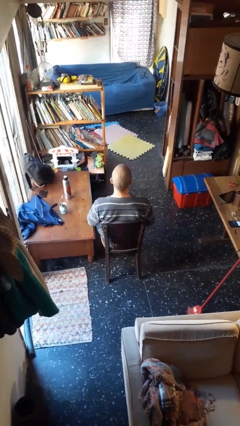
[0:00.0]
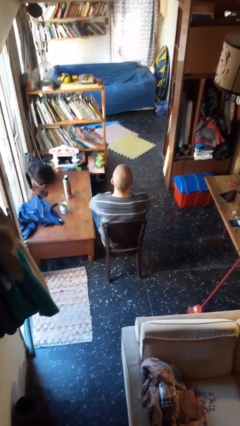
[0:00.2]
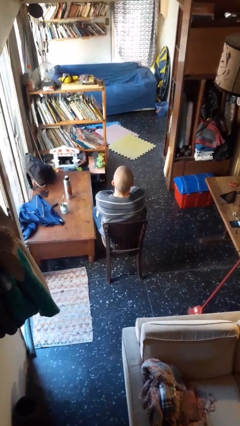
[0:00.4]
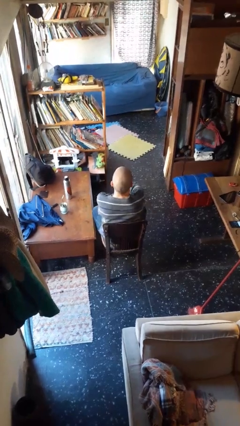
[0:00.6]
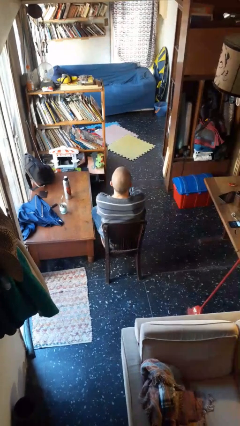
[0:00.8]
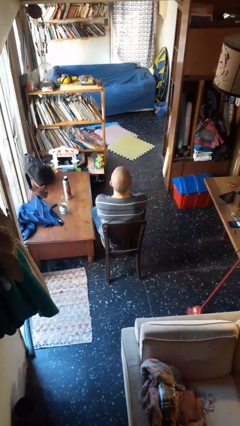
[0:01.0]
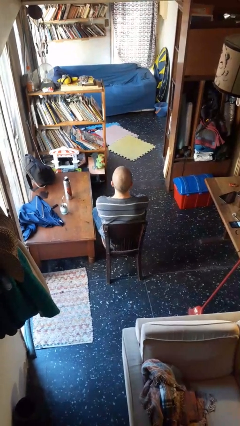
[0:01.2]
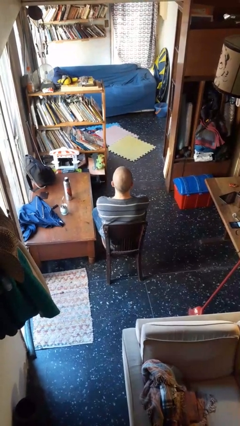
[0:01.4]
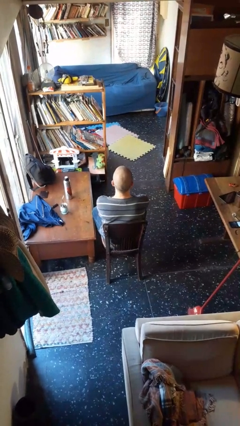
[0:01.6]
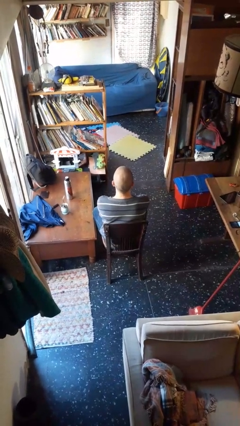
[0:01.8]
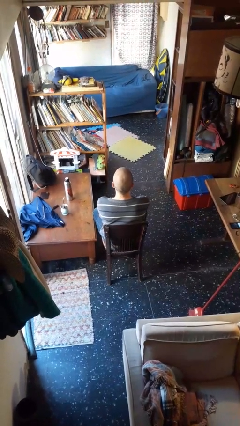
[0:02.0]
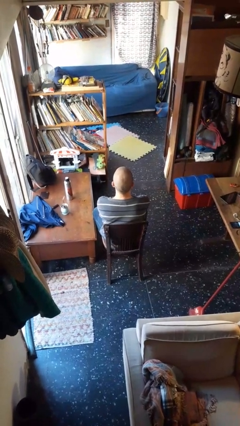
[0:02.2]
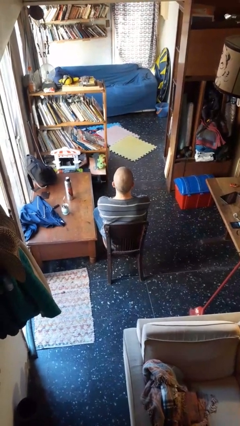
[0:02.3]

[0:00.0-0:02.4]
person crosses arms

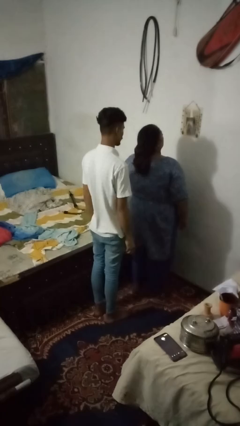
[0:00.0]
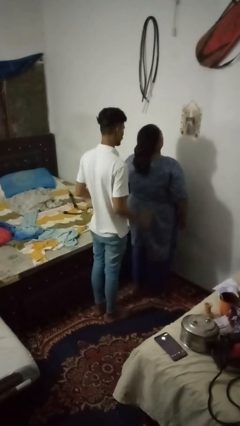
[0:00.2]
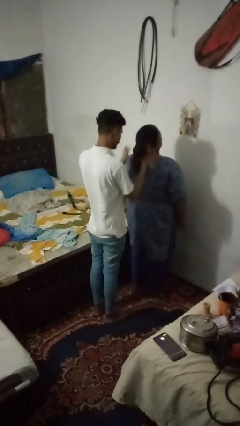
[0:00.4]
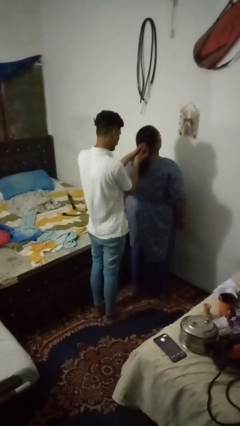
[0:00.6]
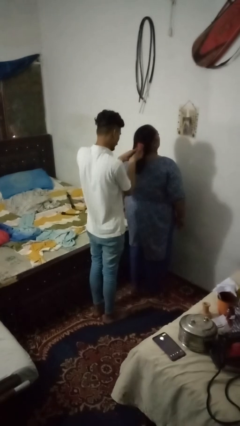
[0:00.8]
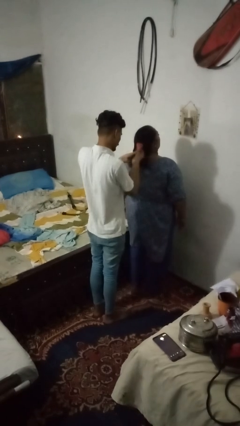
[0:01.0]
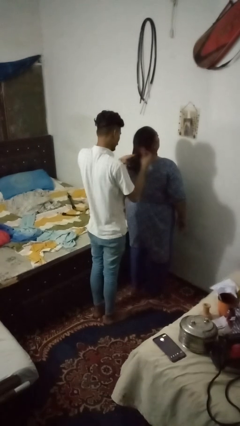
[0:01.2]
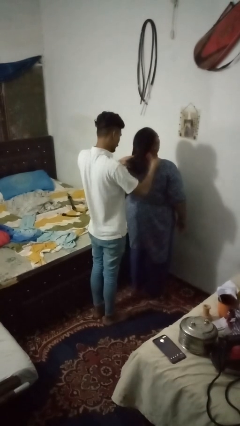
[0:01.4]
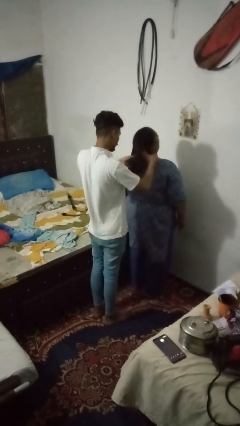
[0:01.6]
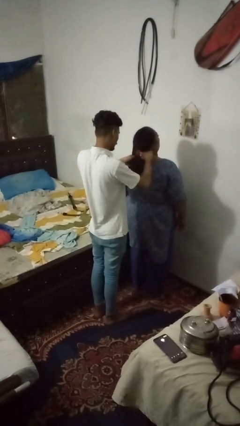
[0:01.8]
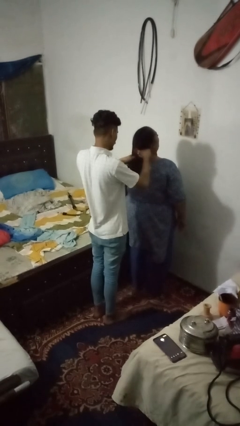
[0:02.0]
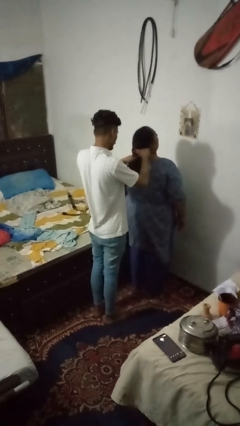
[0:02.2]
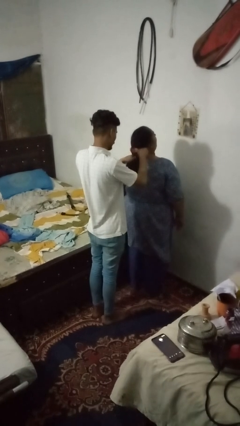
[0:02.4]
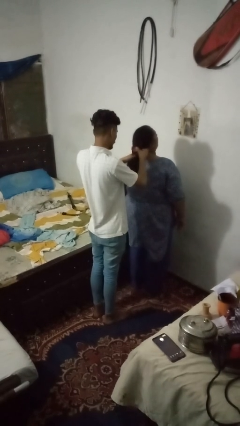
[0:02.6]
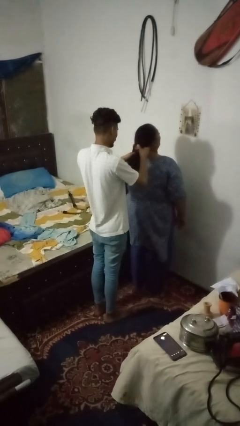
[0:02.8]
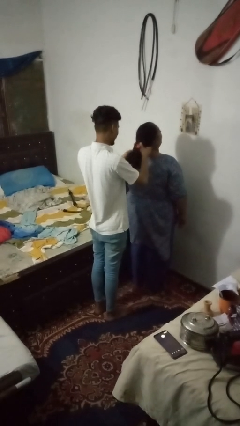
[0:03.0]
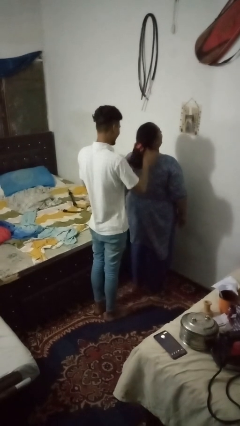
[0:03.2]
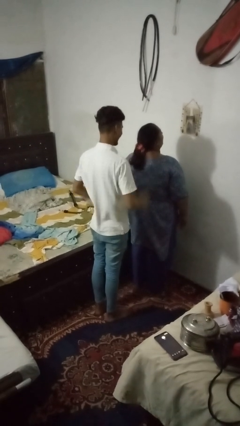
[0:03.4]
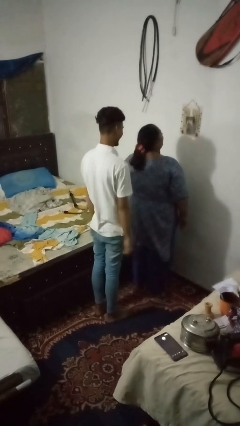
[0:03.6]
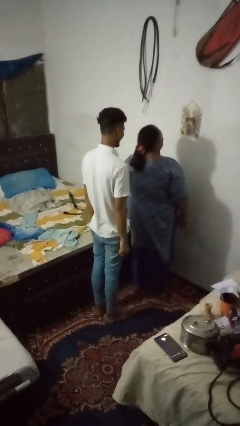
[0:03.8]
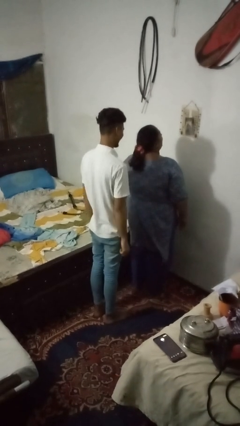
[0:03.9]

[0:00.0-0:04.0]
person braids hair of person

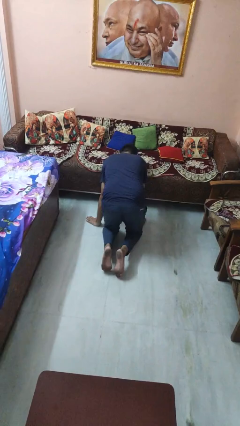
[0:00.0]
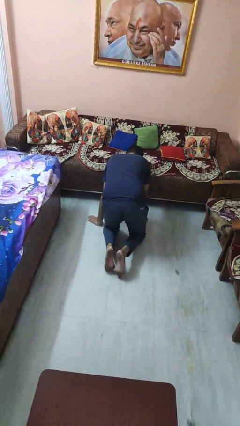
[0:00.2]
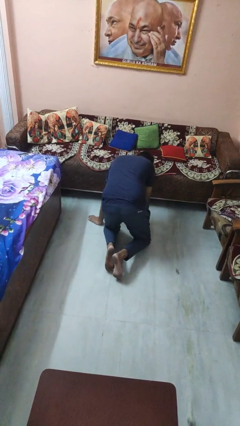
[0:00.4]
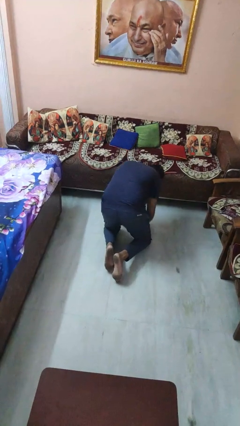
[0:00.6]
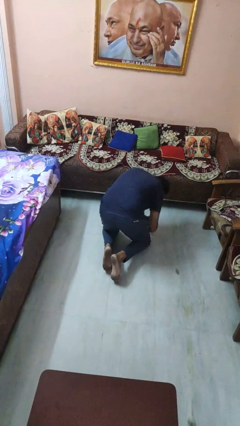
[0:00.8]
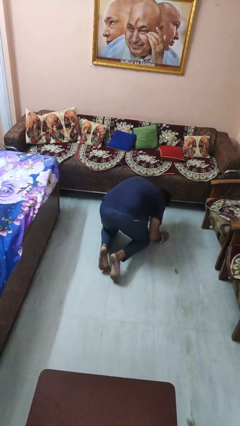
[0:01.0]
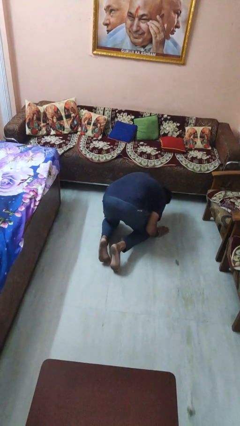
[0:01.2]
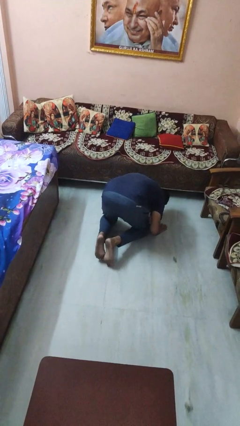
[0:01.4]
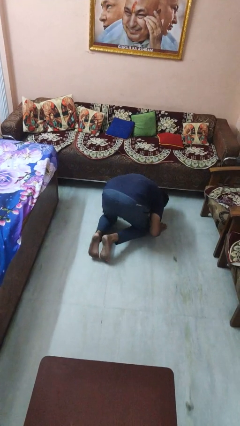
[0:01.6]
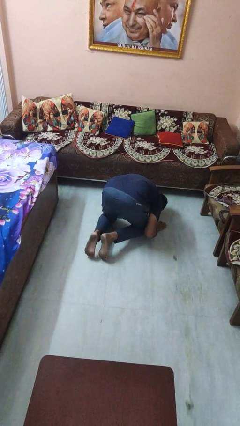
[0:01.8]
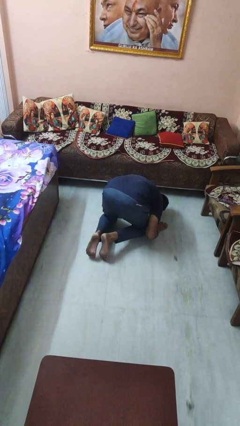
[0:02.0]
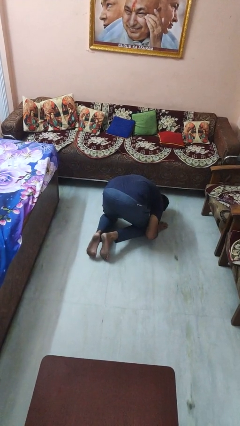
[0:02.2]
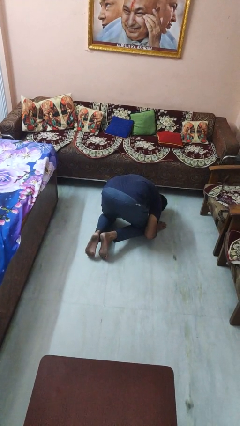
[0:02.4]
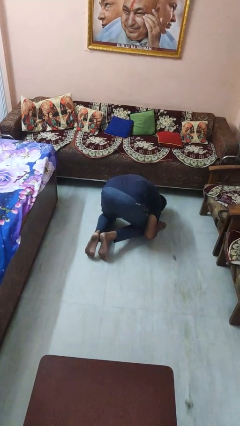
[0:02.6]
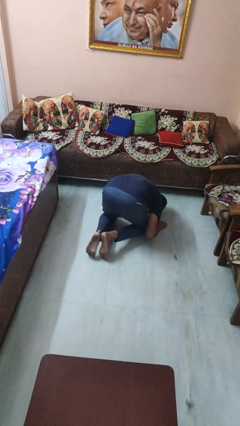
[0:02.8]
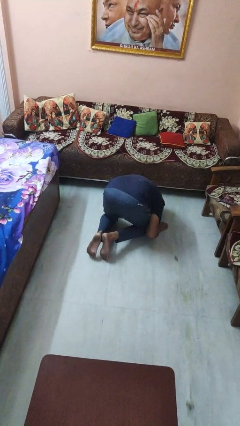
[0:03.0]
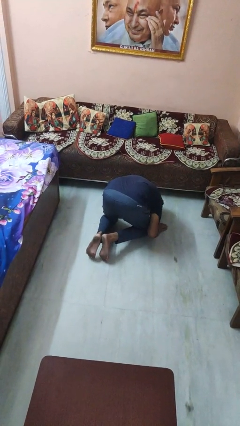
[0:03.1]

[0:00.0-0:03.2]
person searches under couch

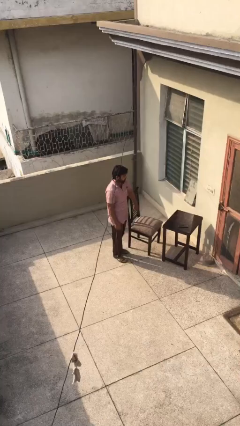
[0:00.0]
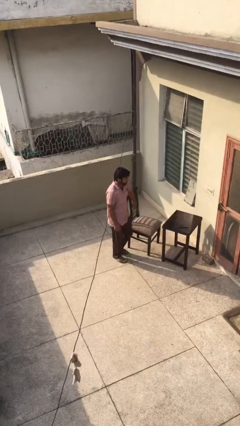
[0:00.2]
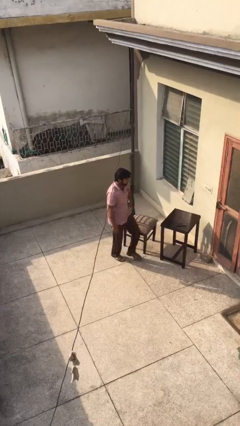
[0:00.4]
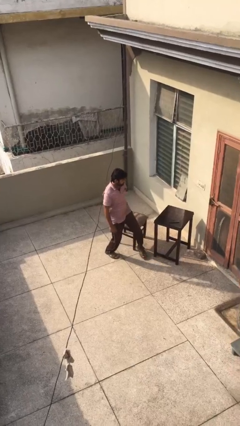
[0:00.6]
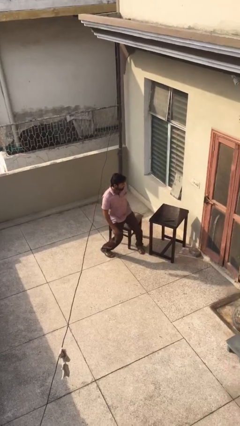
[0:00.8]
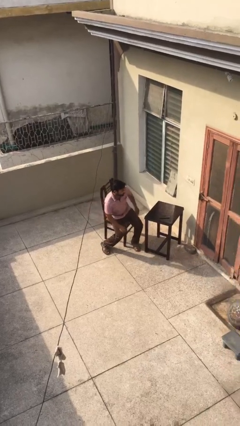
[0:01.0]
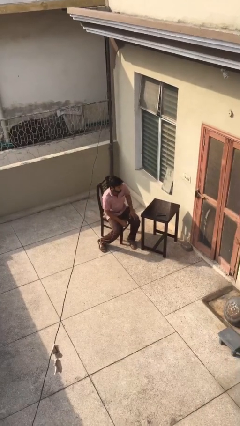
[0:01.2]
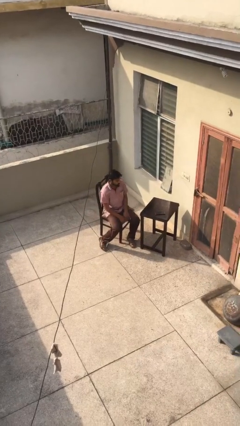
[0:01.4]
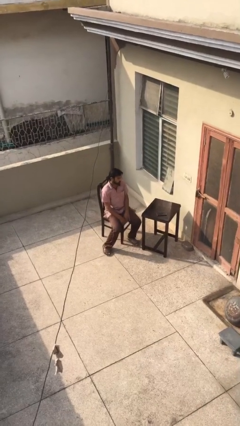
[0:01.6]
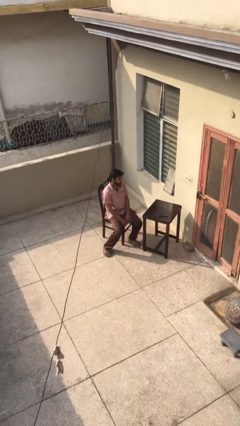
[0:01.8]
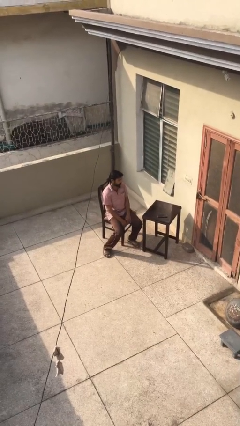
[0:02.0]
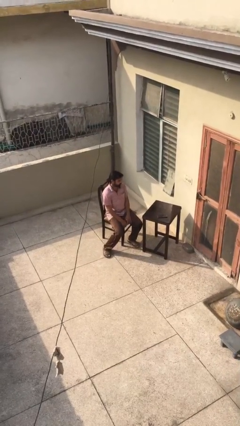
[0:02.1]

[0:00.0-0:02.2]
person sits down

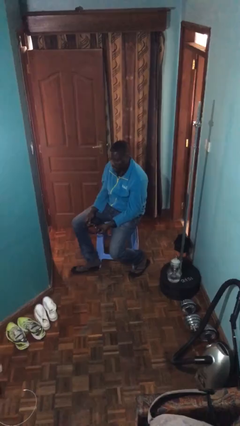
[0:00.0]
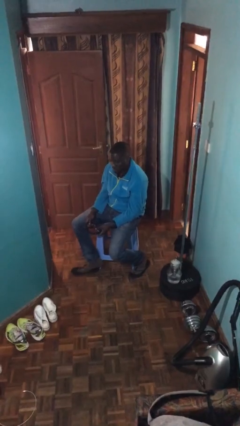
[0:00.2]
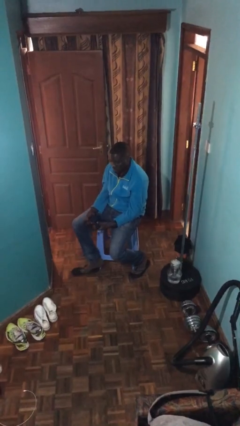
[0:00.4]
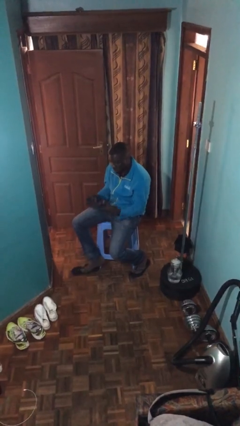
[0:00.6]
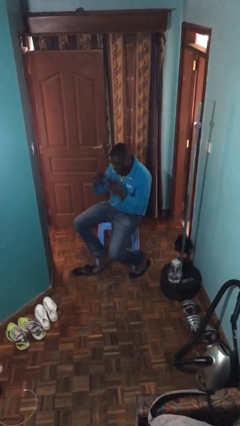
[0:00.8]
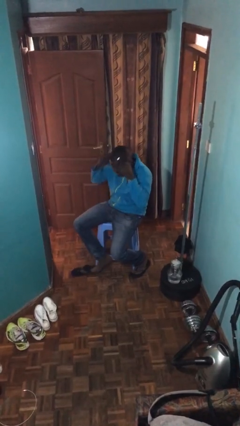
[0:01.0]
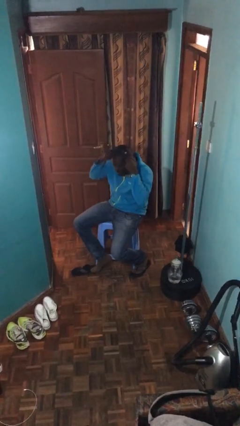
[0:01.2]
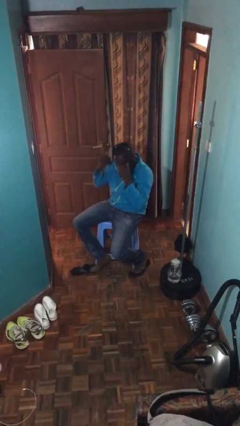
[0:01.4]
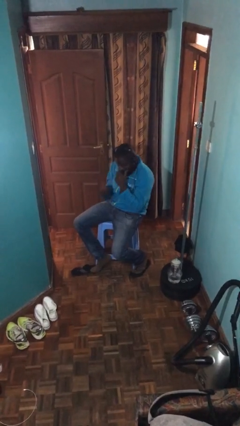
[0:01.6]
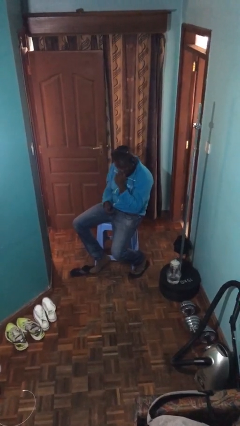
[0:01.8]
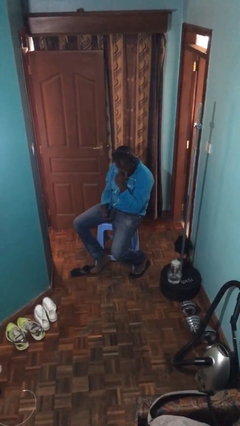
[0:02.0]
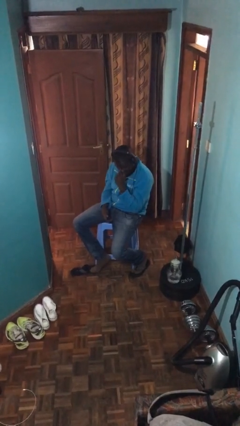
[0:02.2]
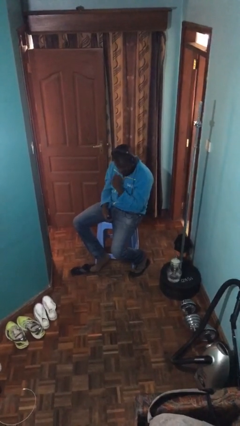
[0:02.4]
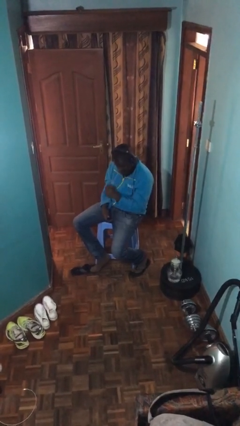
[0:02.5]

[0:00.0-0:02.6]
person puts on headphones

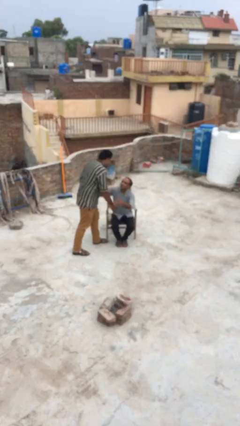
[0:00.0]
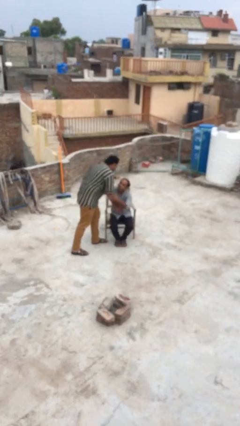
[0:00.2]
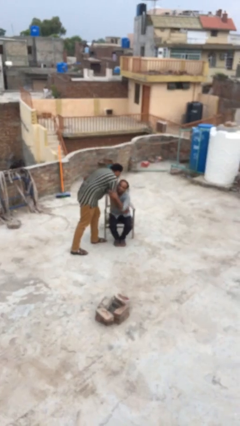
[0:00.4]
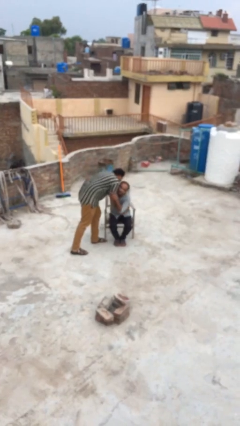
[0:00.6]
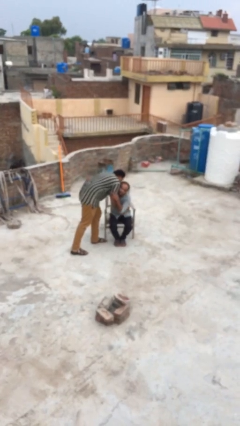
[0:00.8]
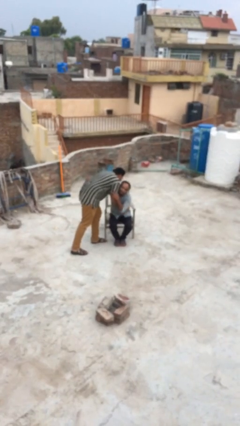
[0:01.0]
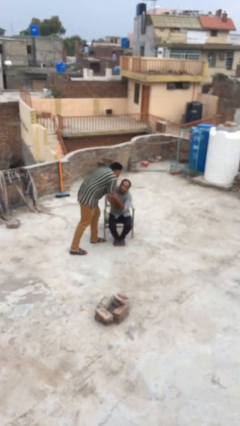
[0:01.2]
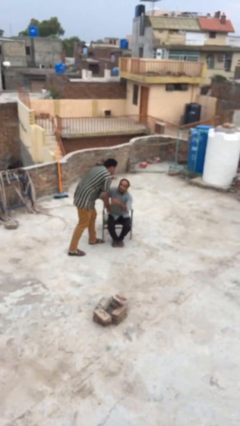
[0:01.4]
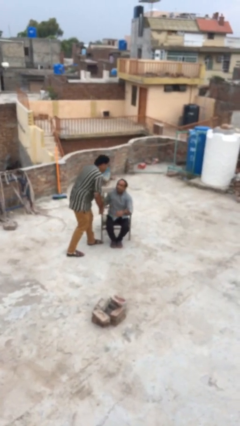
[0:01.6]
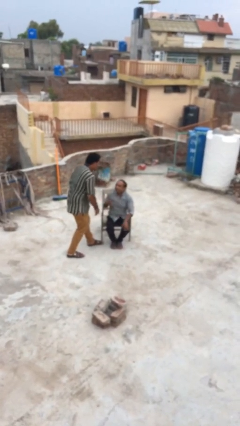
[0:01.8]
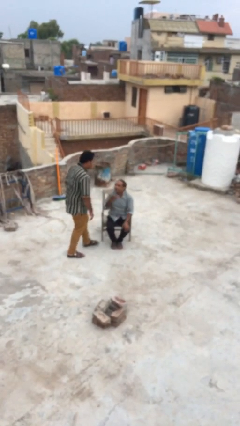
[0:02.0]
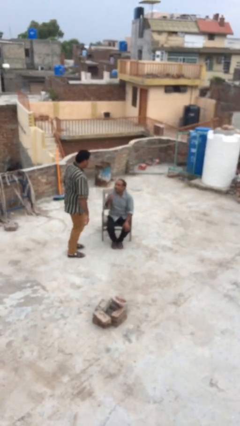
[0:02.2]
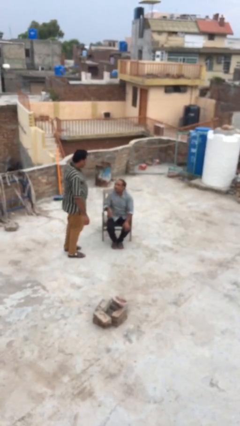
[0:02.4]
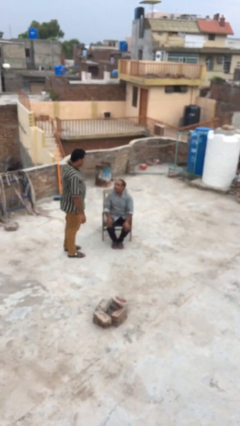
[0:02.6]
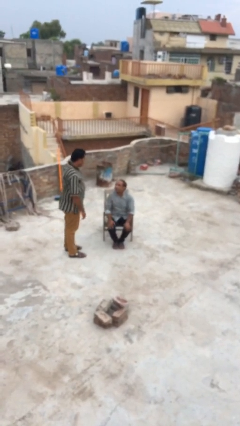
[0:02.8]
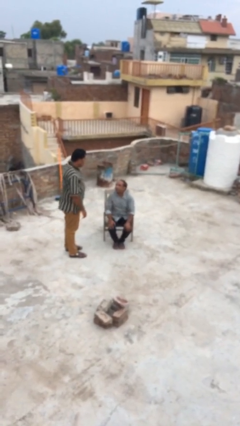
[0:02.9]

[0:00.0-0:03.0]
person embraces person
